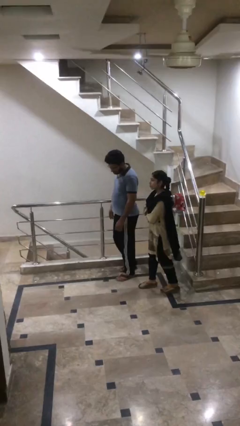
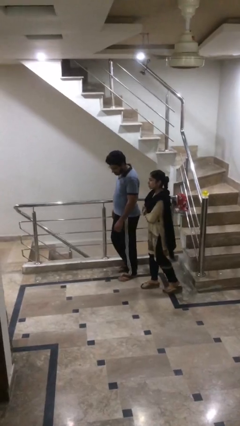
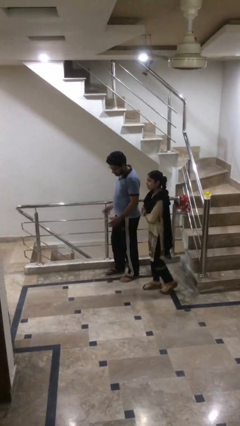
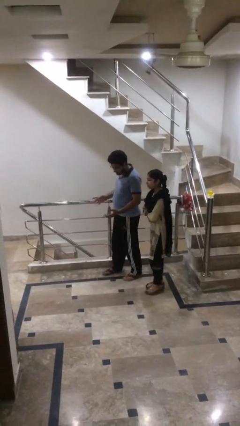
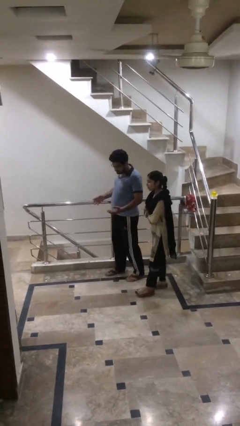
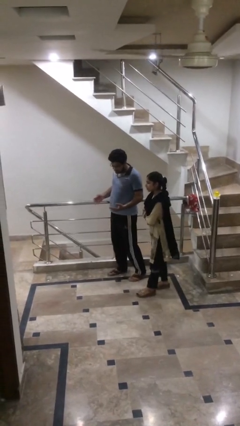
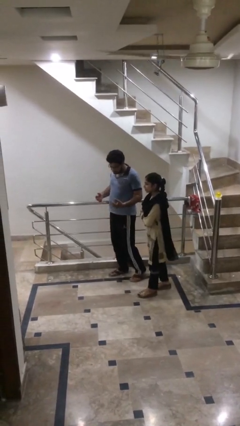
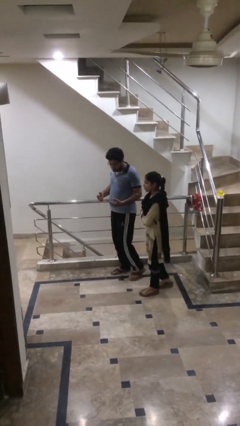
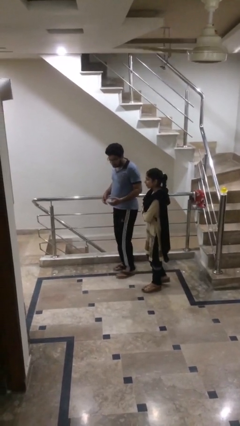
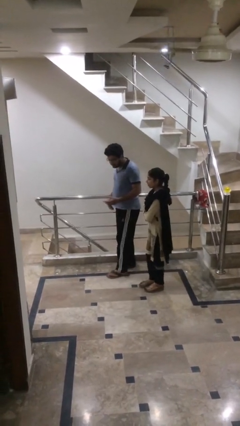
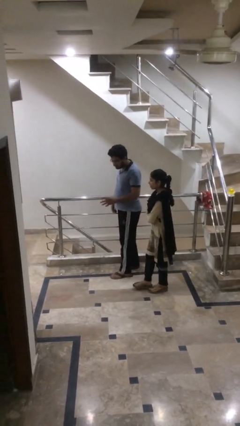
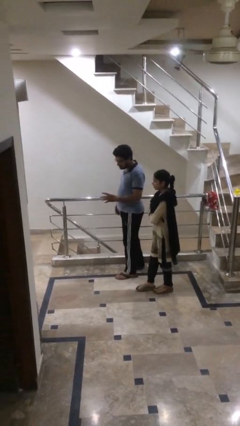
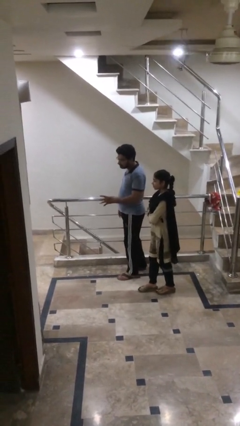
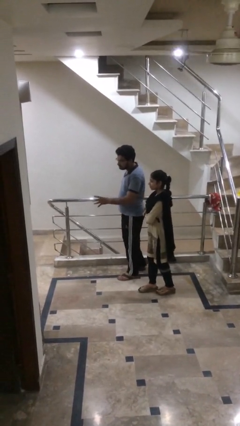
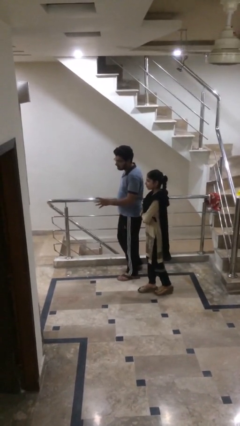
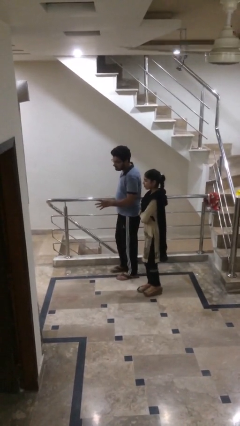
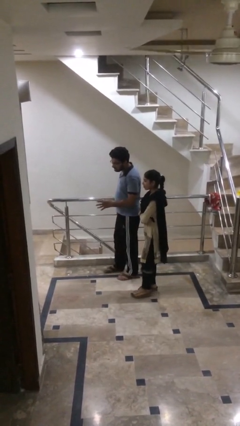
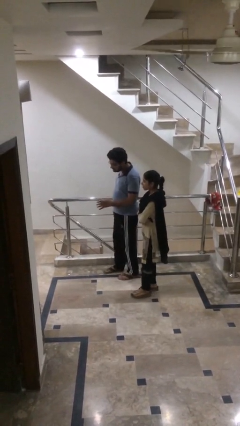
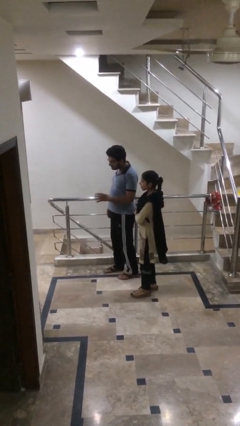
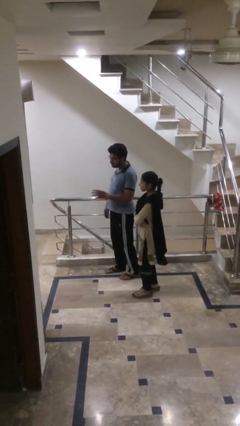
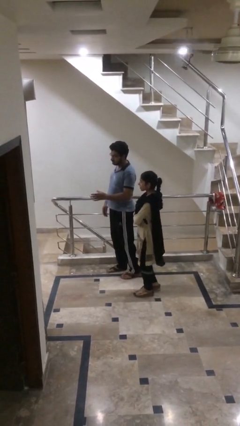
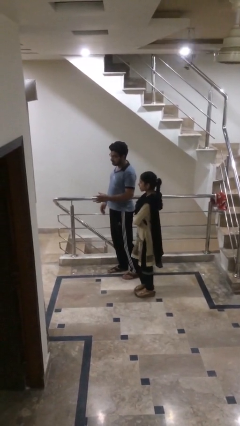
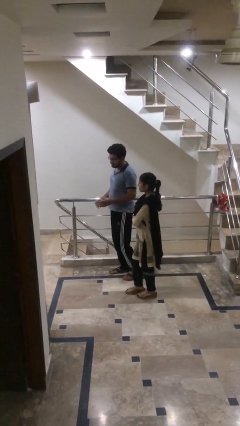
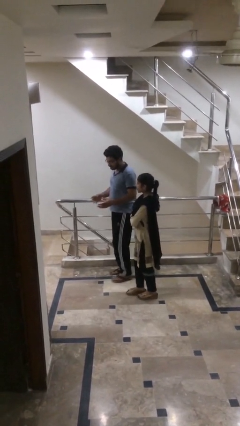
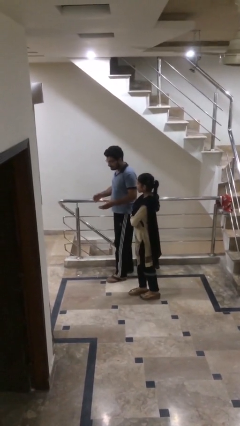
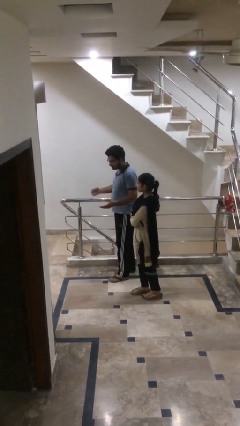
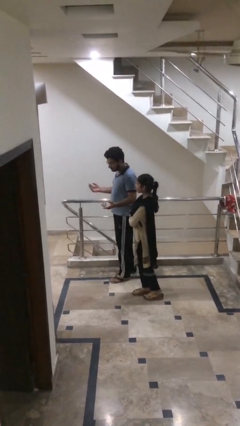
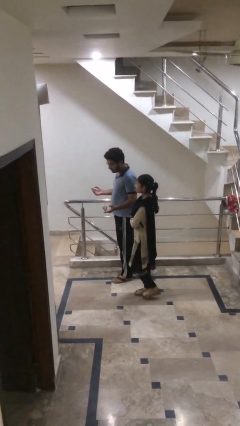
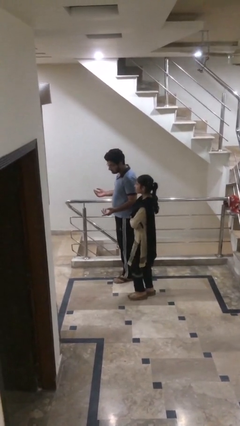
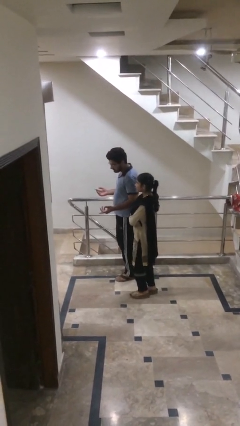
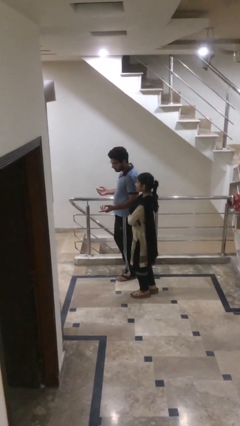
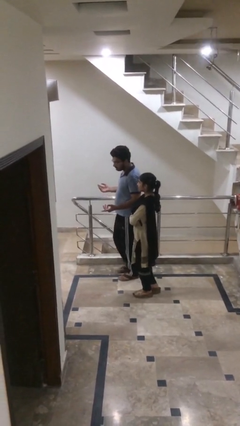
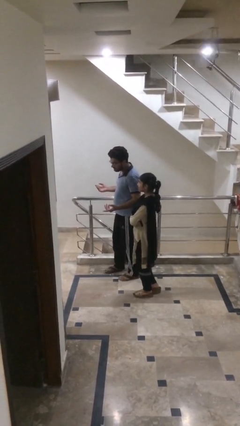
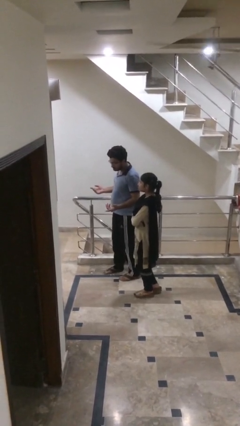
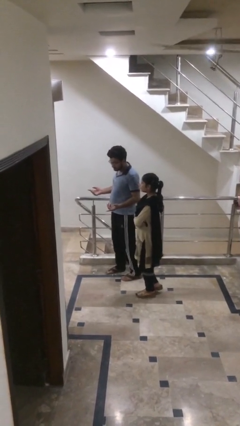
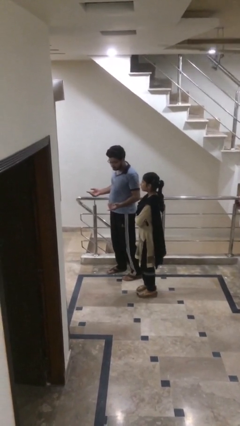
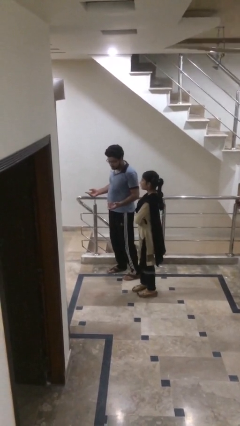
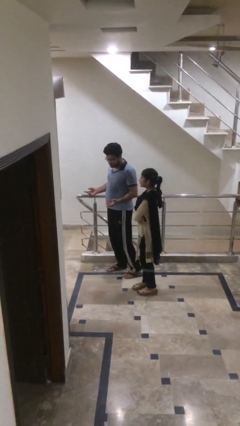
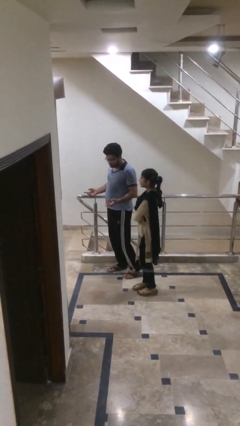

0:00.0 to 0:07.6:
person talks to person

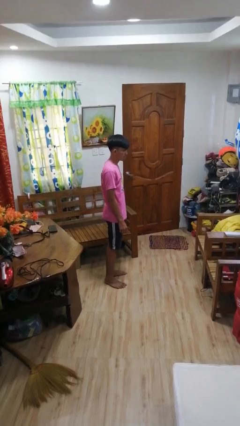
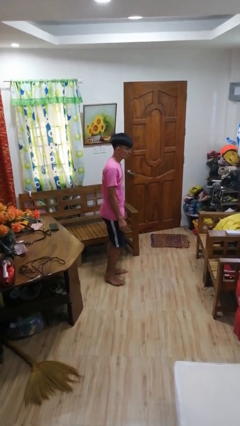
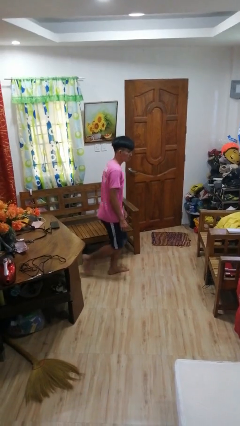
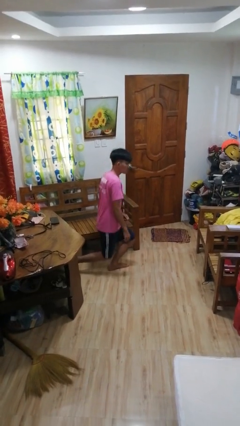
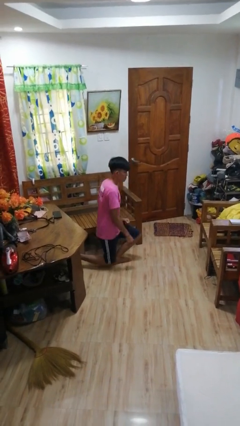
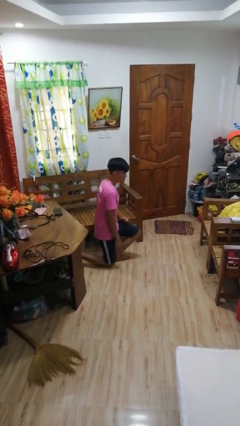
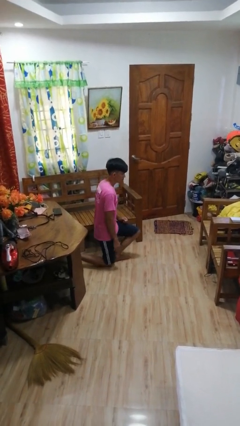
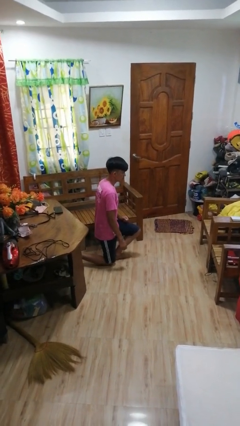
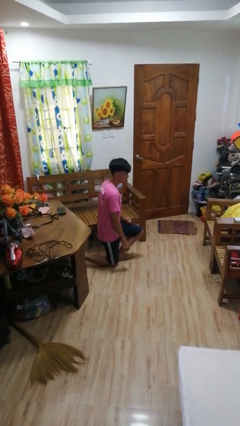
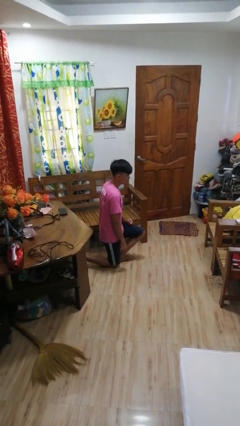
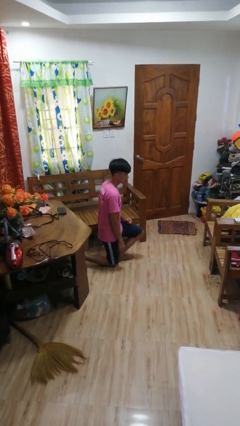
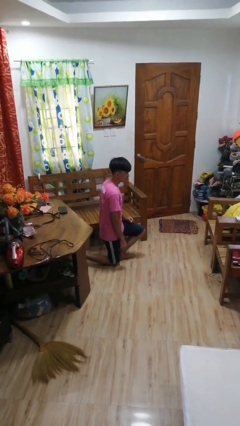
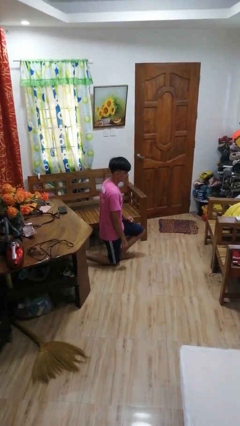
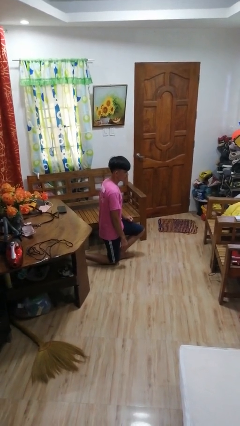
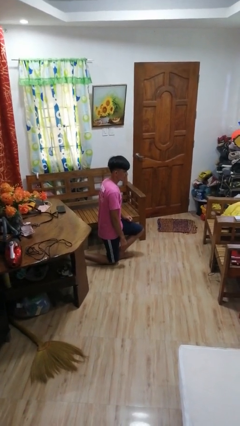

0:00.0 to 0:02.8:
person kneels

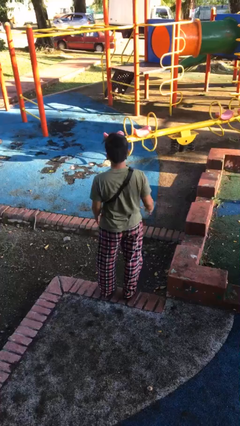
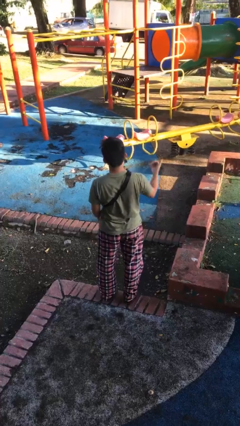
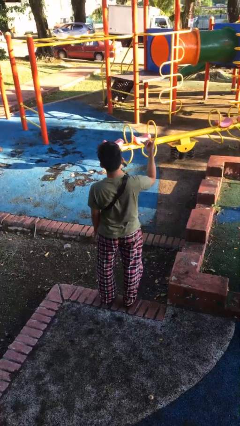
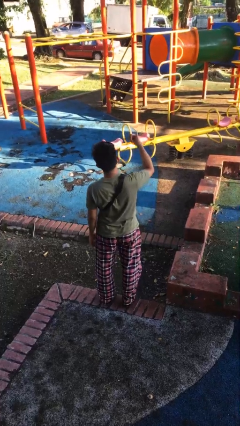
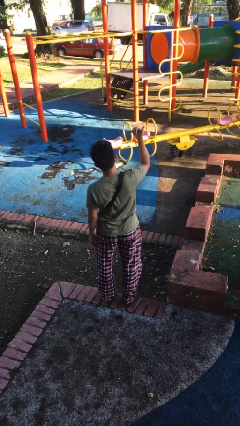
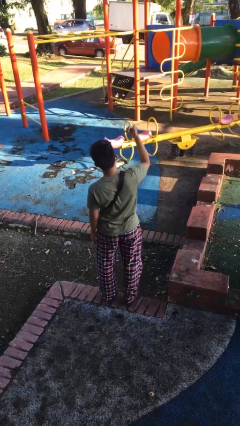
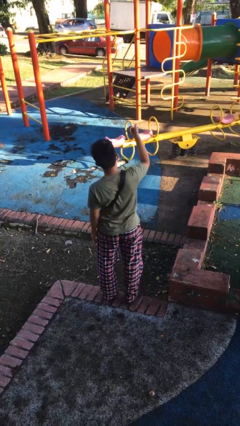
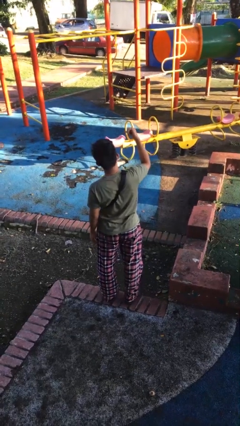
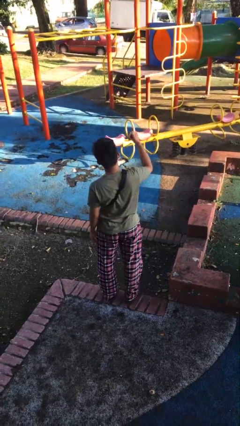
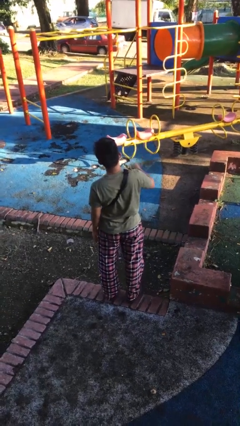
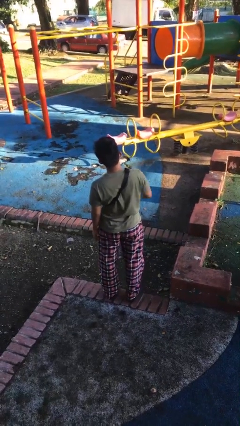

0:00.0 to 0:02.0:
person gestures hang loose

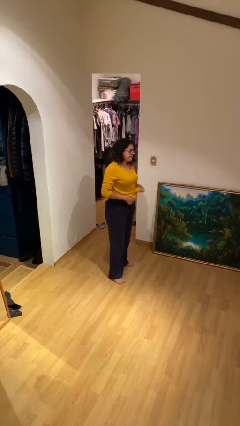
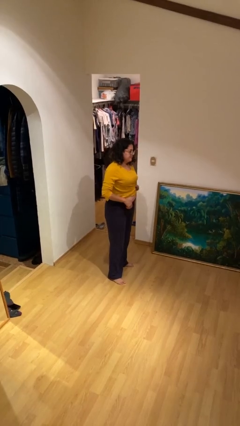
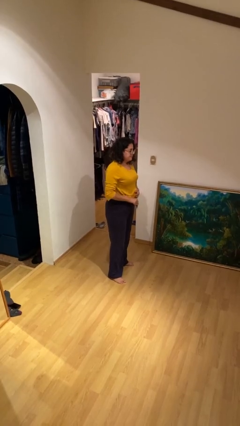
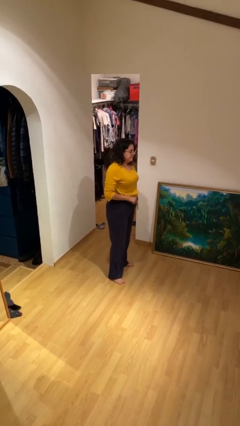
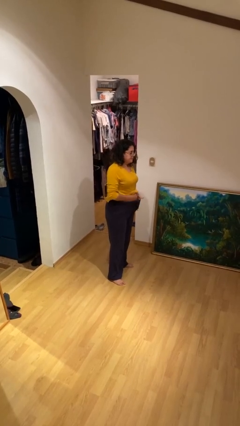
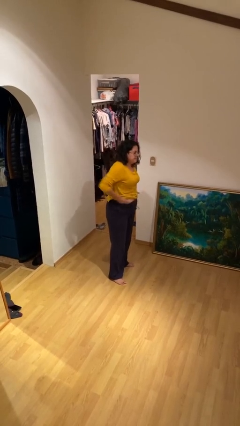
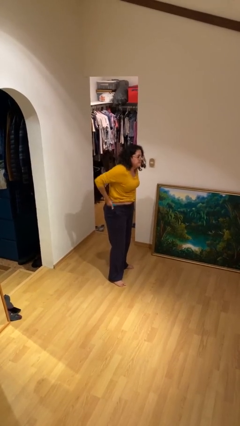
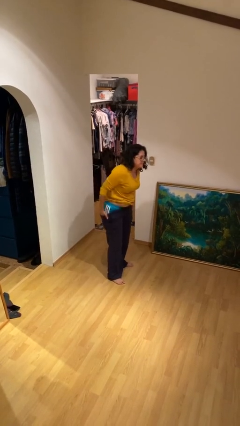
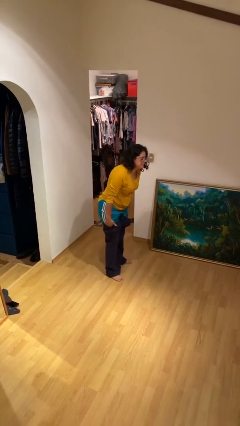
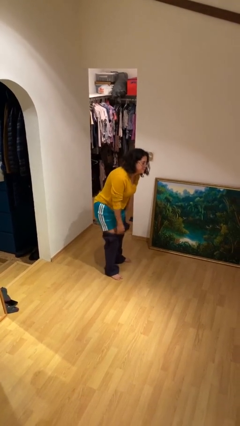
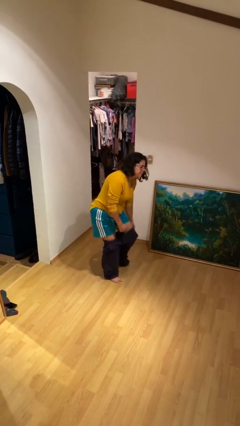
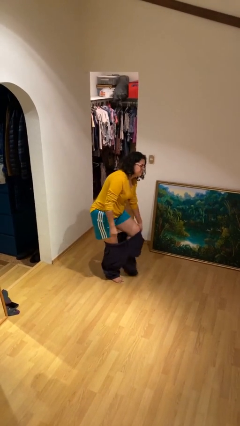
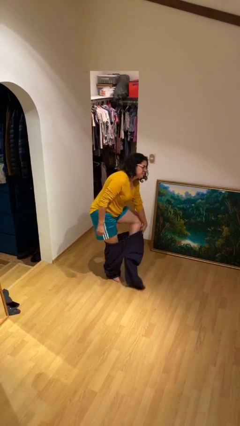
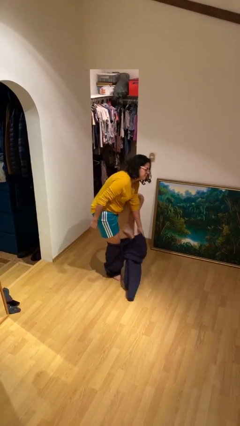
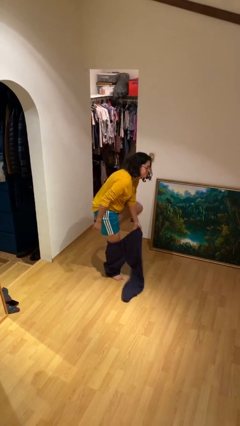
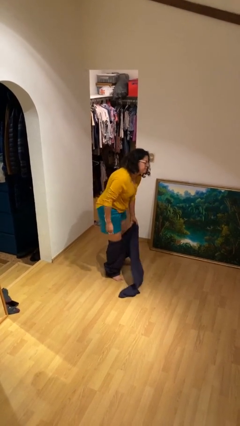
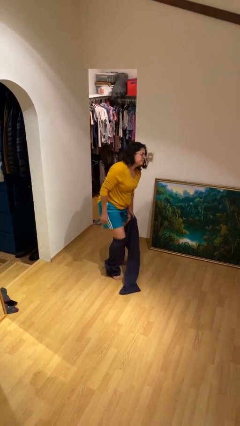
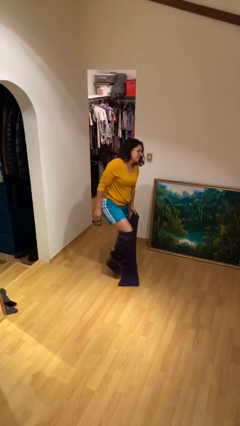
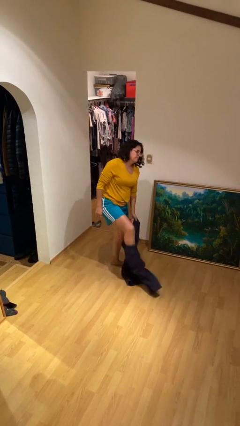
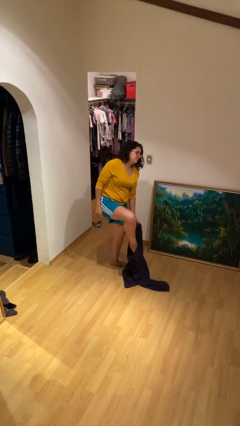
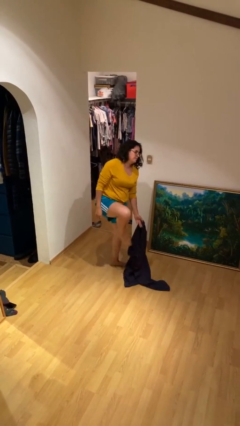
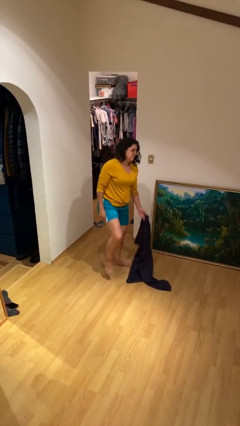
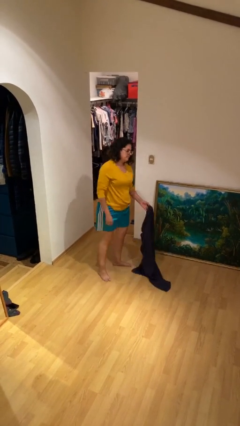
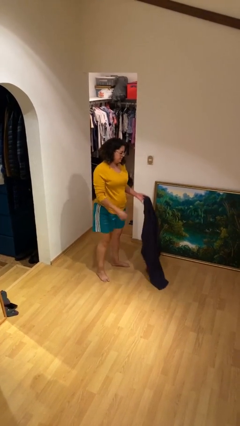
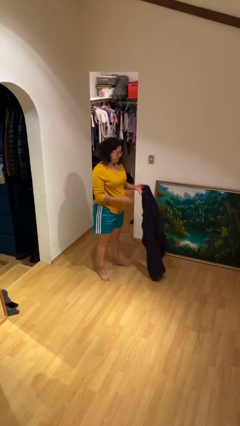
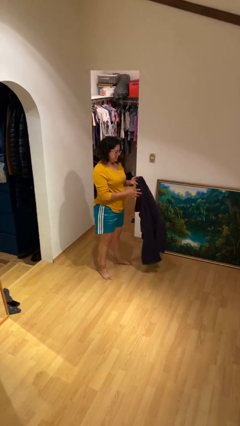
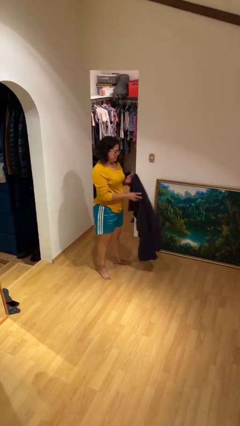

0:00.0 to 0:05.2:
person takes off pants

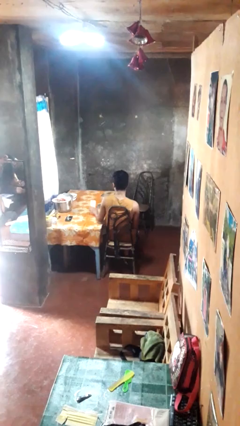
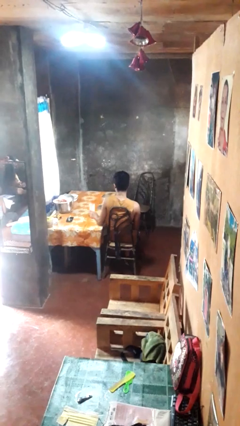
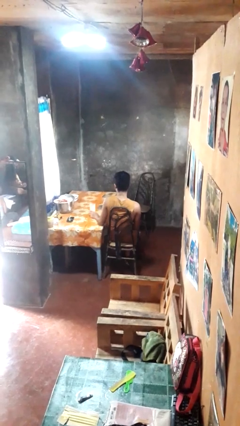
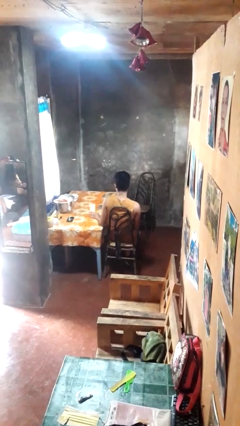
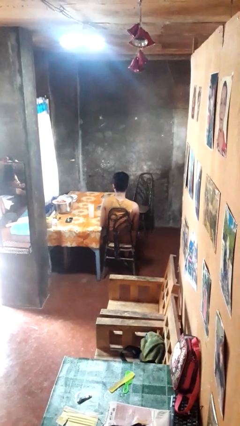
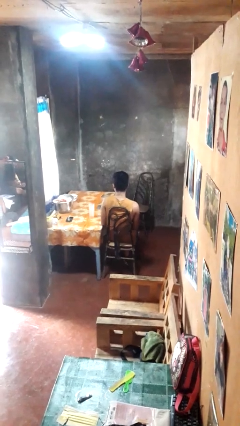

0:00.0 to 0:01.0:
person sets upright glass
